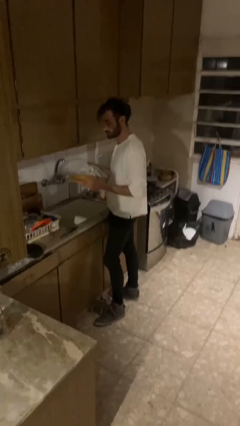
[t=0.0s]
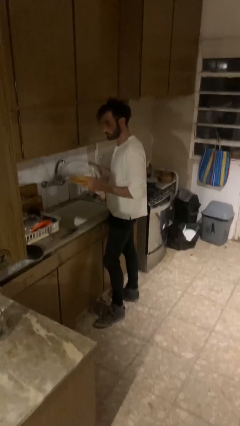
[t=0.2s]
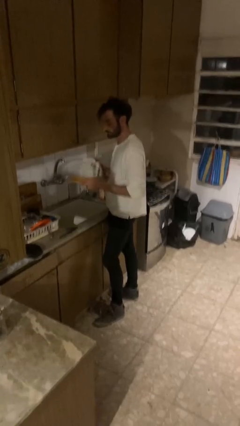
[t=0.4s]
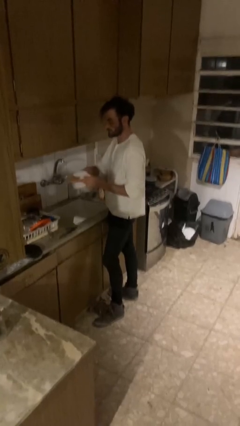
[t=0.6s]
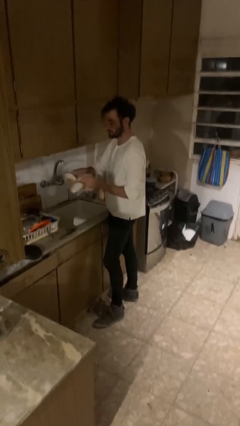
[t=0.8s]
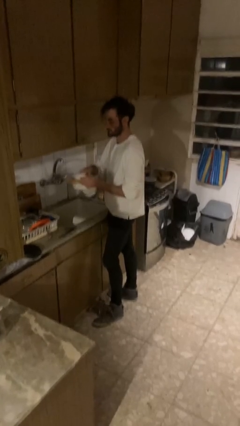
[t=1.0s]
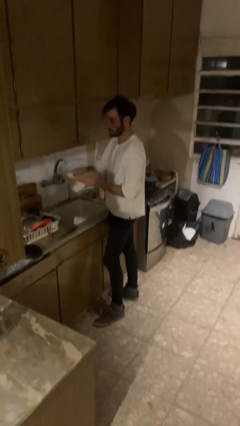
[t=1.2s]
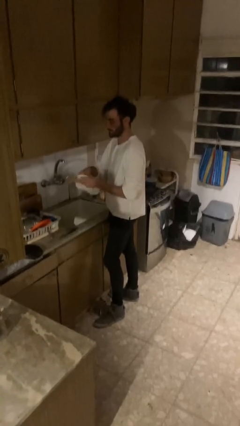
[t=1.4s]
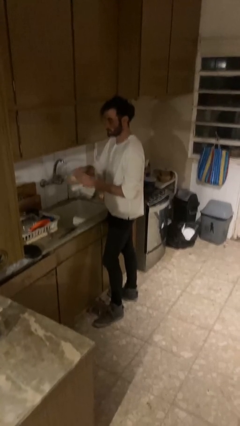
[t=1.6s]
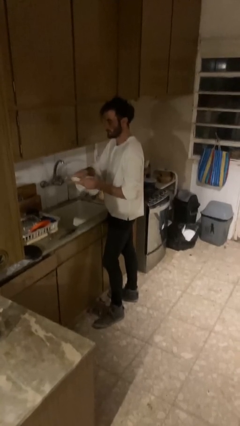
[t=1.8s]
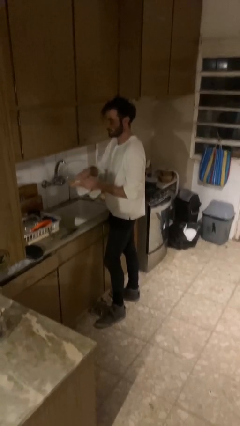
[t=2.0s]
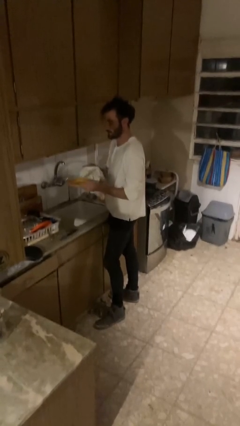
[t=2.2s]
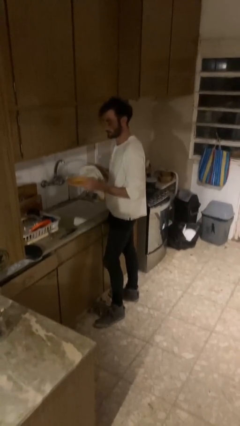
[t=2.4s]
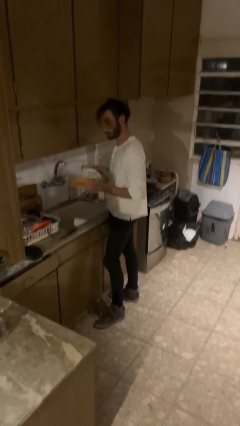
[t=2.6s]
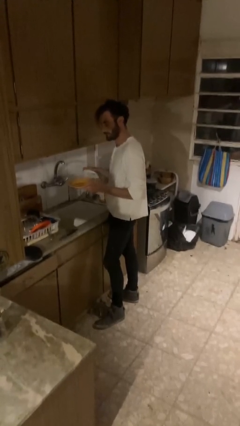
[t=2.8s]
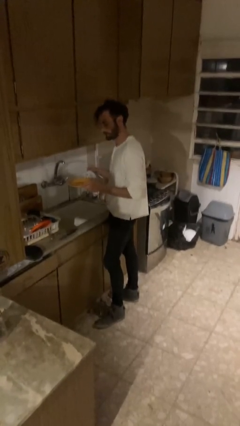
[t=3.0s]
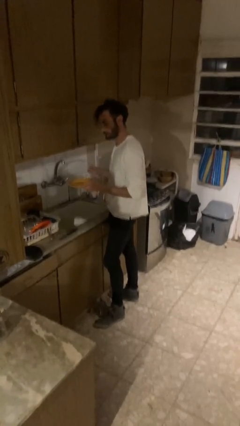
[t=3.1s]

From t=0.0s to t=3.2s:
person dries dish

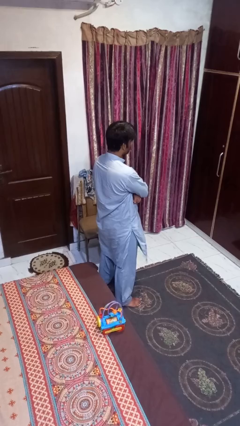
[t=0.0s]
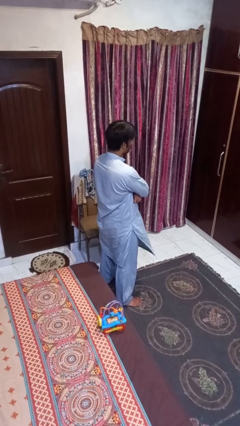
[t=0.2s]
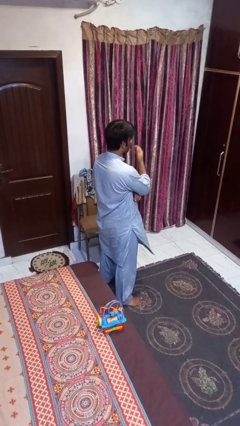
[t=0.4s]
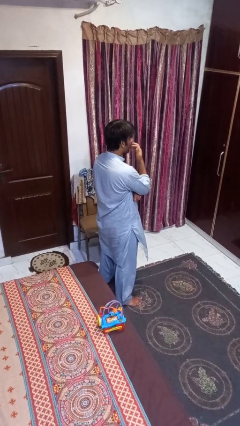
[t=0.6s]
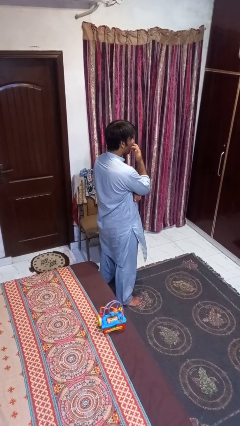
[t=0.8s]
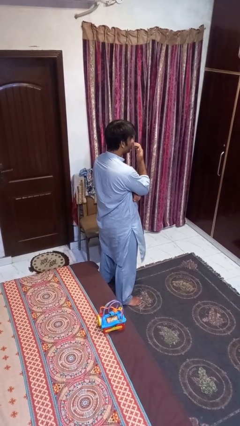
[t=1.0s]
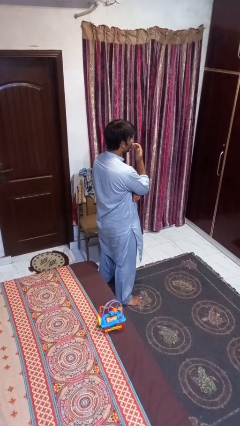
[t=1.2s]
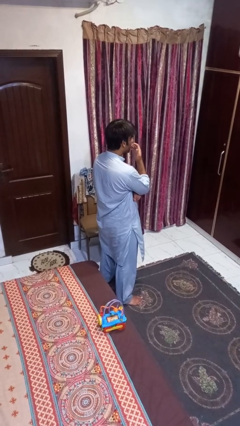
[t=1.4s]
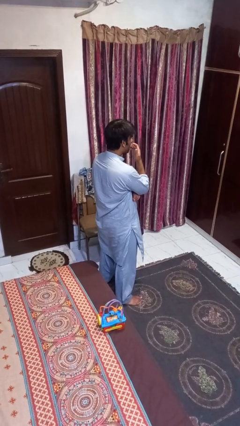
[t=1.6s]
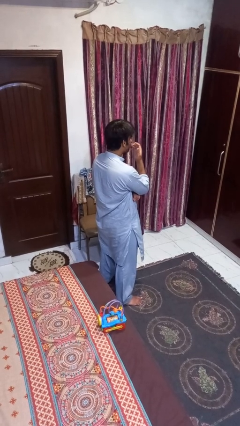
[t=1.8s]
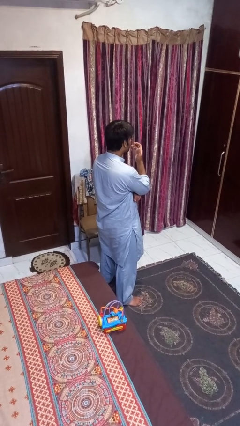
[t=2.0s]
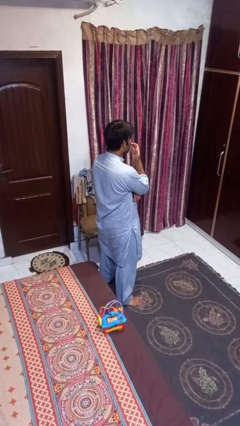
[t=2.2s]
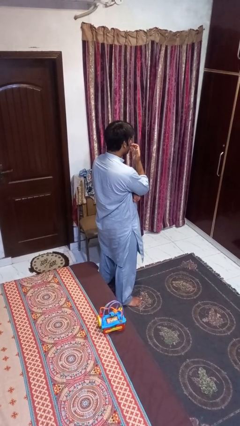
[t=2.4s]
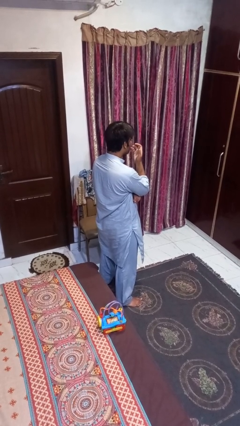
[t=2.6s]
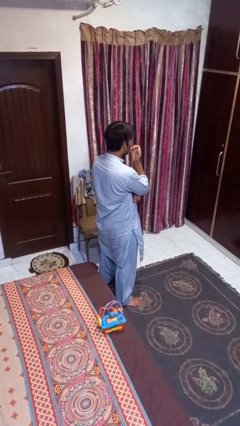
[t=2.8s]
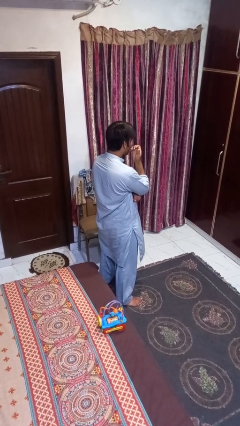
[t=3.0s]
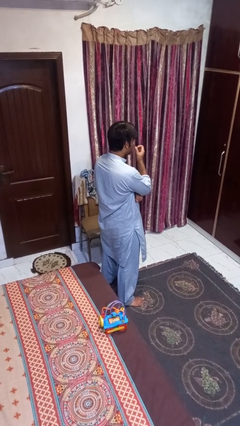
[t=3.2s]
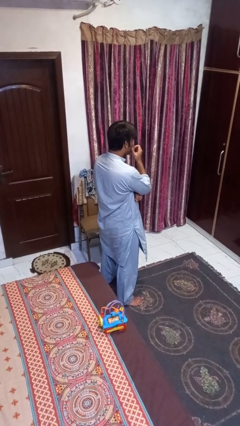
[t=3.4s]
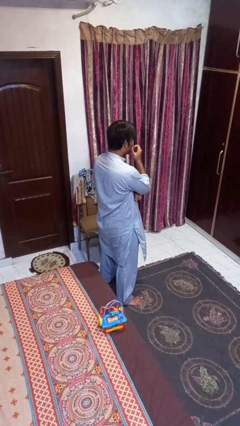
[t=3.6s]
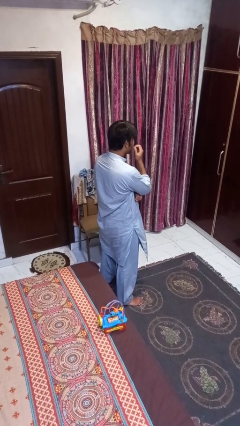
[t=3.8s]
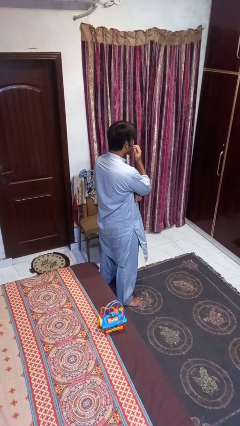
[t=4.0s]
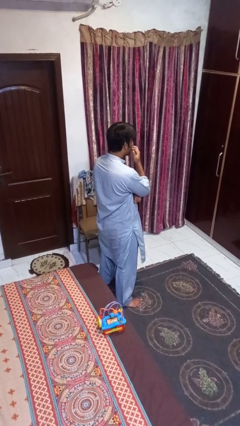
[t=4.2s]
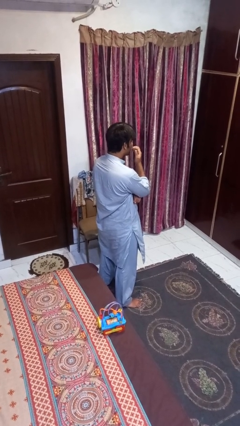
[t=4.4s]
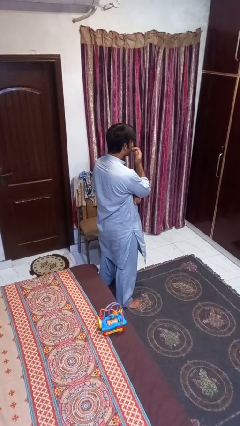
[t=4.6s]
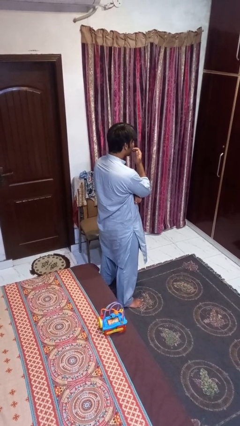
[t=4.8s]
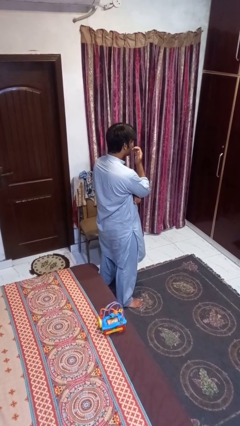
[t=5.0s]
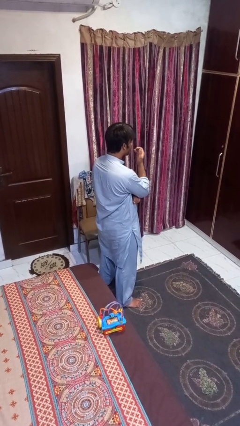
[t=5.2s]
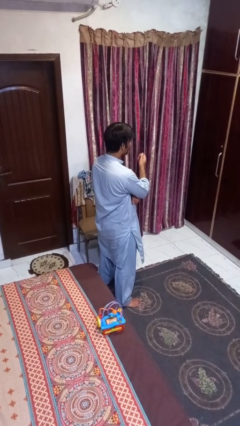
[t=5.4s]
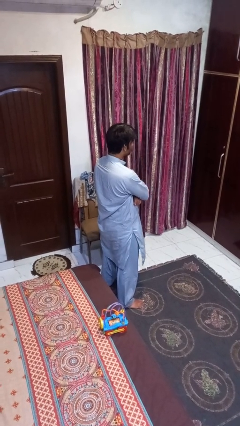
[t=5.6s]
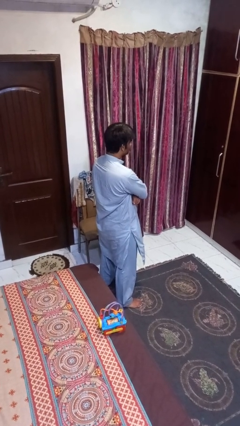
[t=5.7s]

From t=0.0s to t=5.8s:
person licks fingers

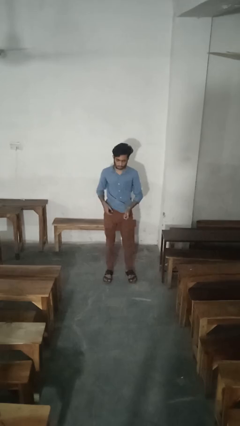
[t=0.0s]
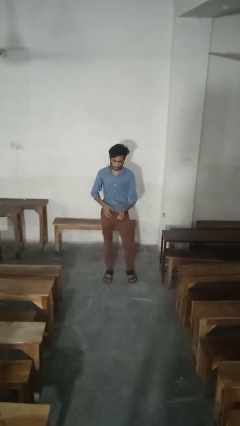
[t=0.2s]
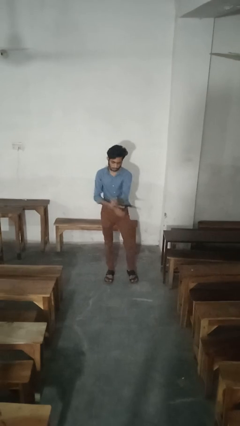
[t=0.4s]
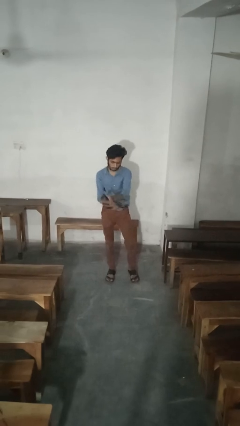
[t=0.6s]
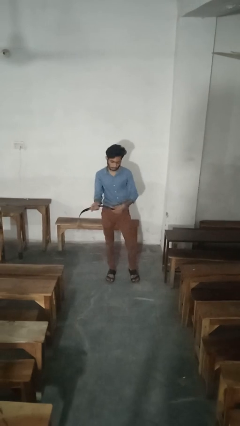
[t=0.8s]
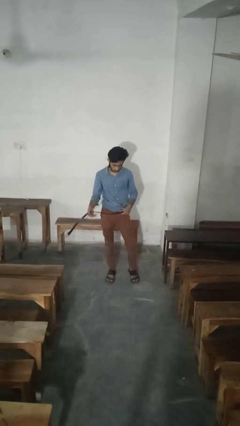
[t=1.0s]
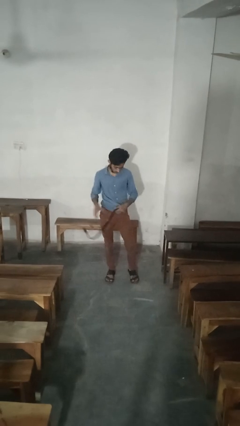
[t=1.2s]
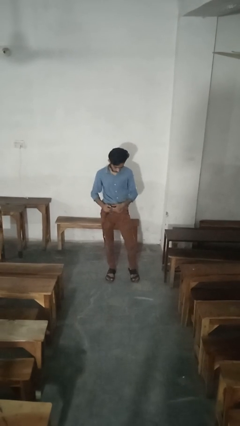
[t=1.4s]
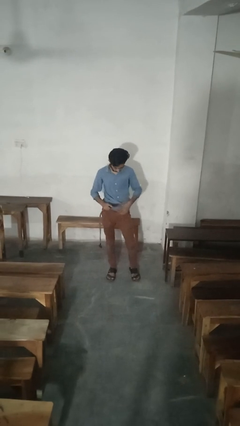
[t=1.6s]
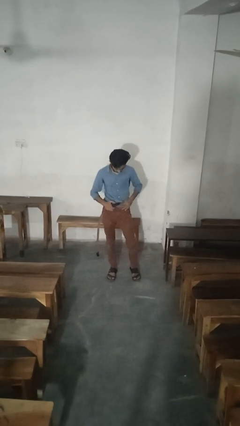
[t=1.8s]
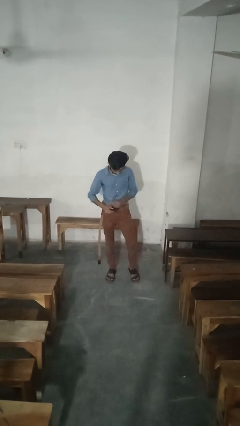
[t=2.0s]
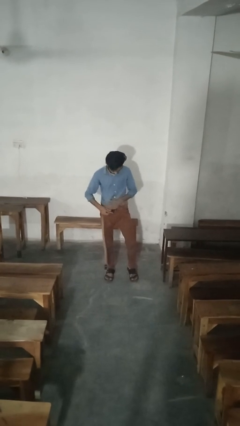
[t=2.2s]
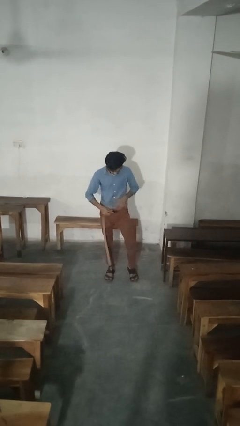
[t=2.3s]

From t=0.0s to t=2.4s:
person takes off belt

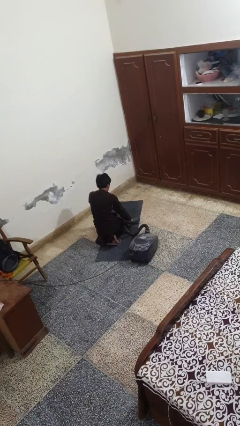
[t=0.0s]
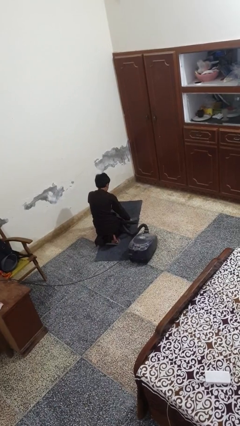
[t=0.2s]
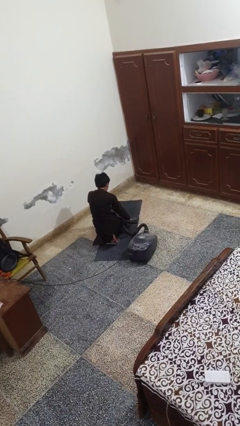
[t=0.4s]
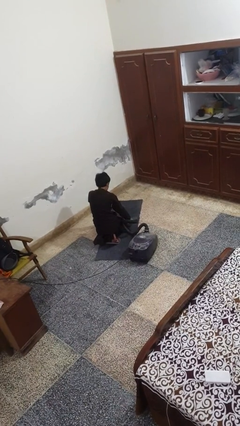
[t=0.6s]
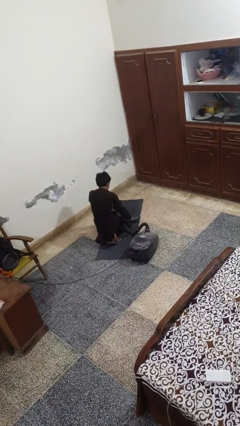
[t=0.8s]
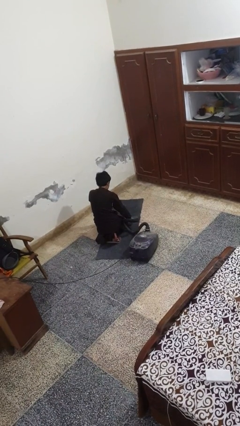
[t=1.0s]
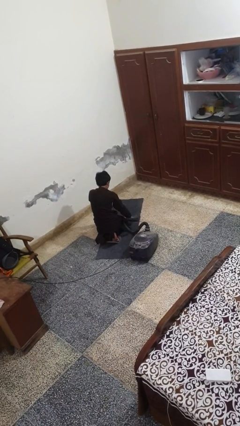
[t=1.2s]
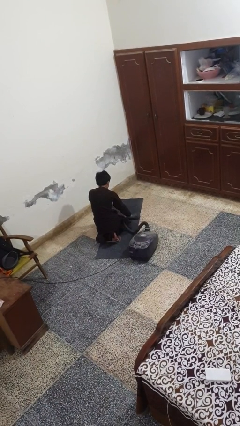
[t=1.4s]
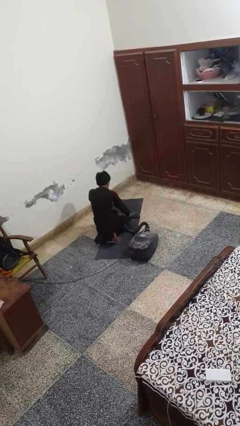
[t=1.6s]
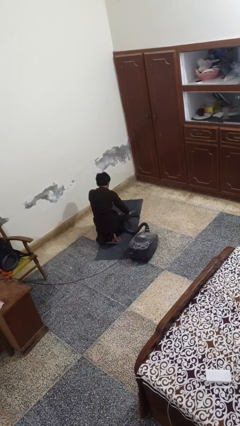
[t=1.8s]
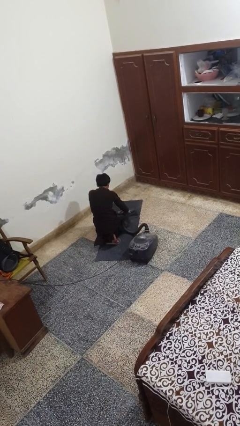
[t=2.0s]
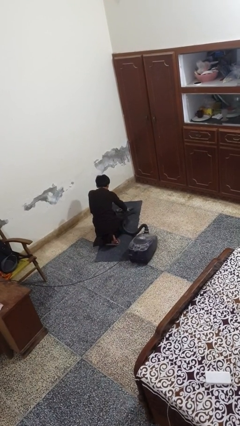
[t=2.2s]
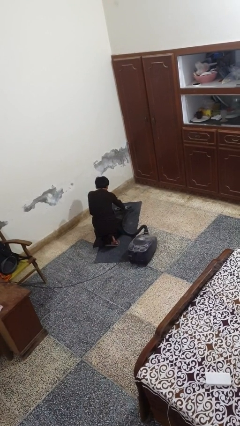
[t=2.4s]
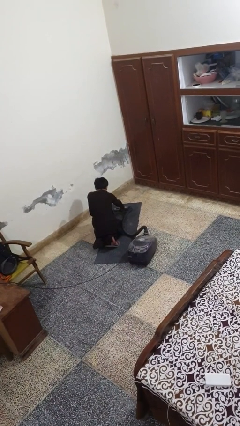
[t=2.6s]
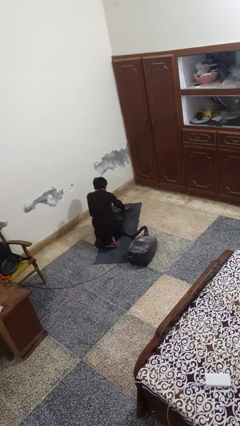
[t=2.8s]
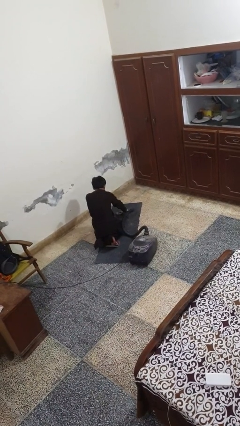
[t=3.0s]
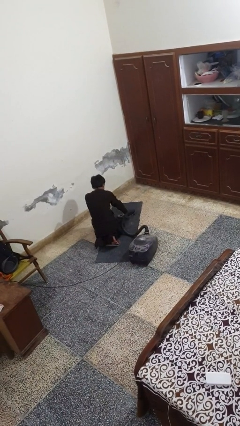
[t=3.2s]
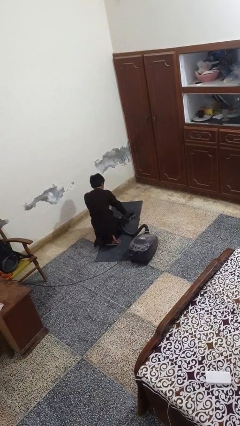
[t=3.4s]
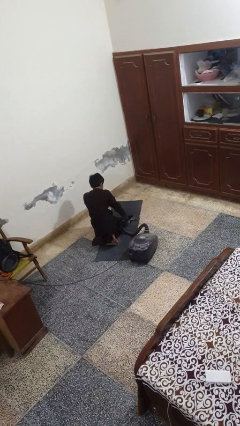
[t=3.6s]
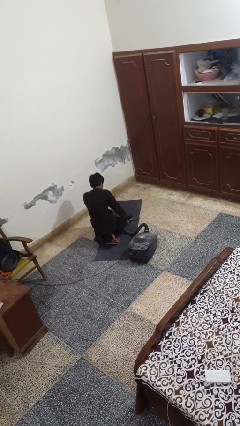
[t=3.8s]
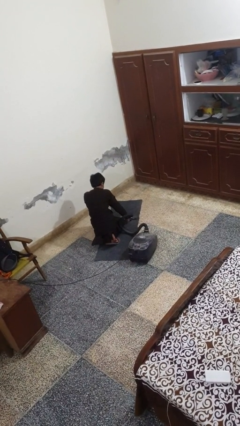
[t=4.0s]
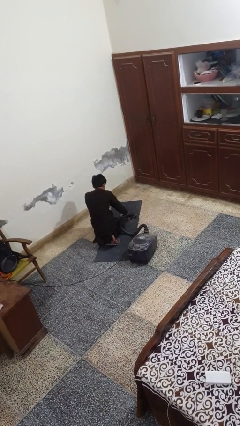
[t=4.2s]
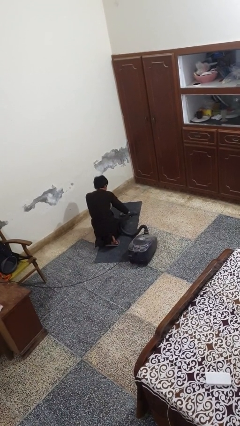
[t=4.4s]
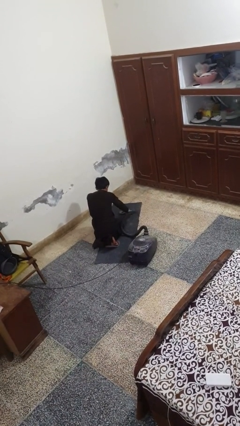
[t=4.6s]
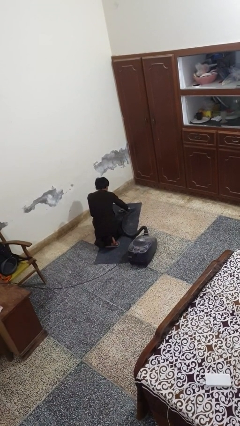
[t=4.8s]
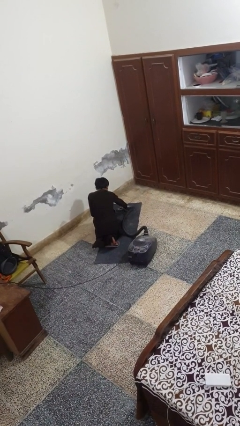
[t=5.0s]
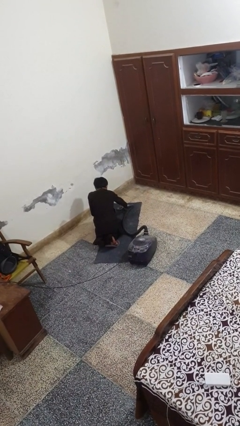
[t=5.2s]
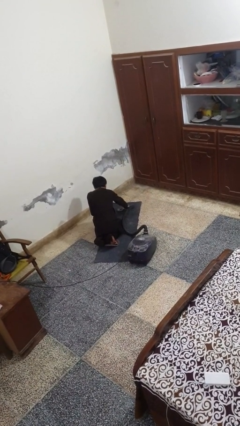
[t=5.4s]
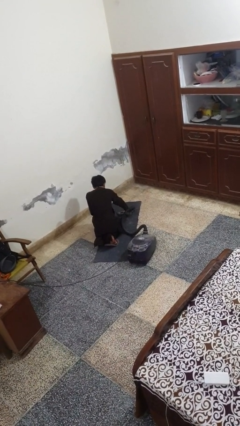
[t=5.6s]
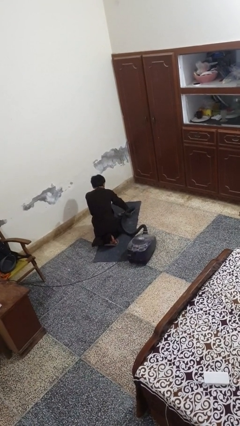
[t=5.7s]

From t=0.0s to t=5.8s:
person vacuums carpet

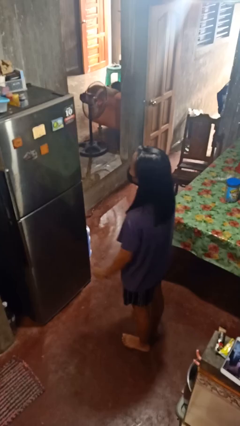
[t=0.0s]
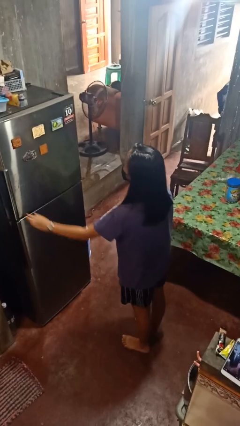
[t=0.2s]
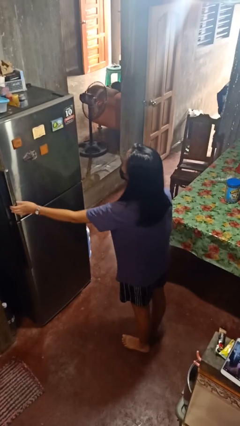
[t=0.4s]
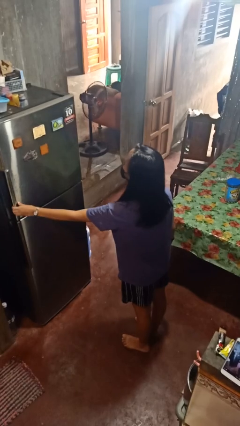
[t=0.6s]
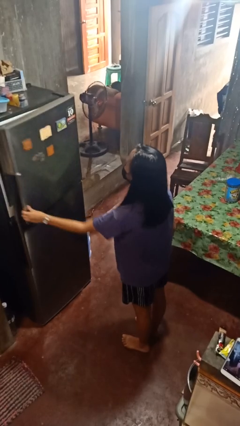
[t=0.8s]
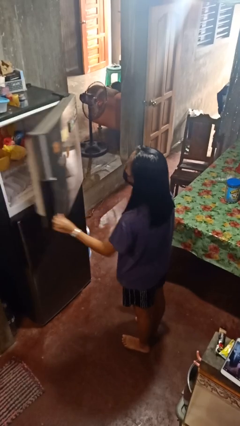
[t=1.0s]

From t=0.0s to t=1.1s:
person opens refrigerator
